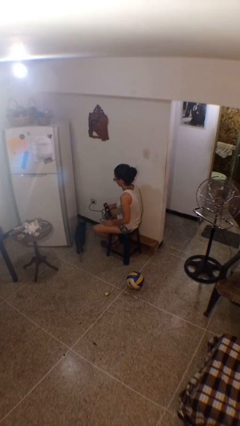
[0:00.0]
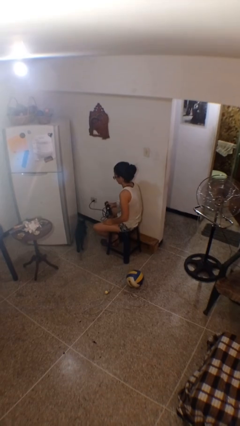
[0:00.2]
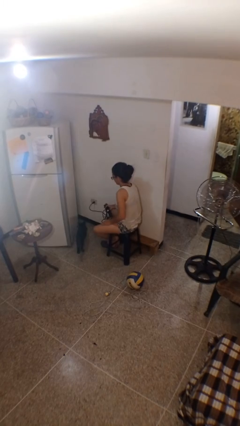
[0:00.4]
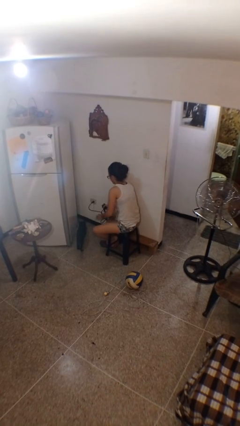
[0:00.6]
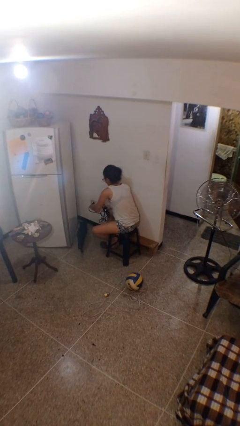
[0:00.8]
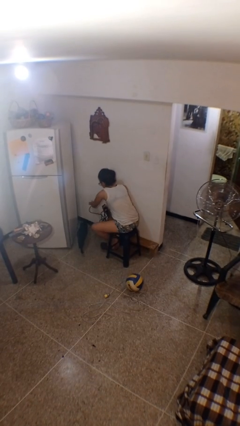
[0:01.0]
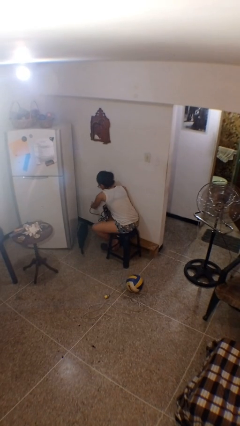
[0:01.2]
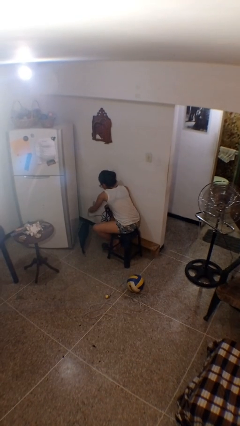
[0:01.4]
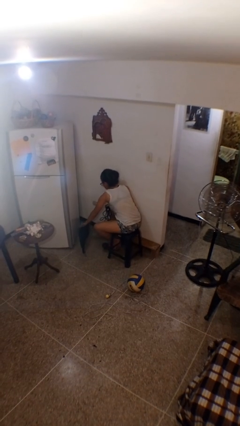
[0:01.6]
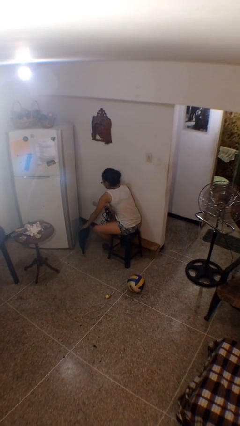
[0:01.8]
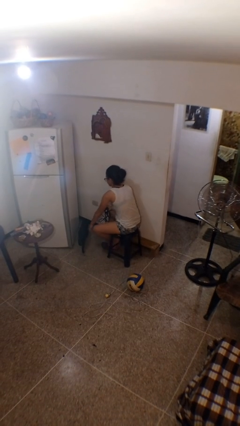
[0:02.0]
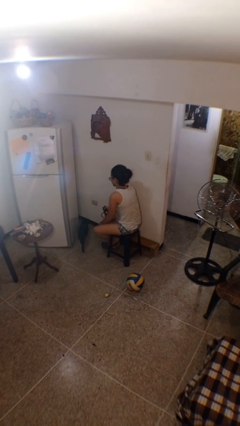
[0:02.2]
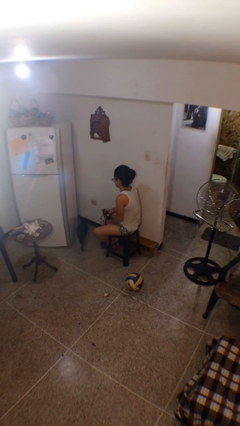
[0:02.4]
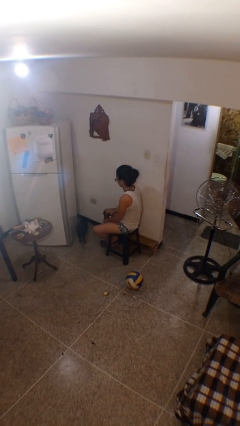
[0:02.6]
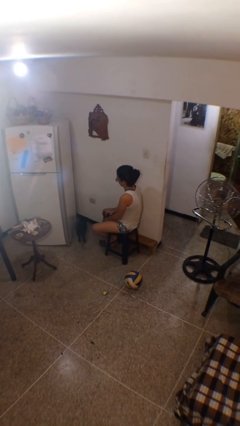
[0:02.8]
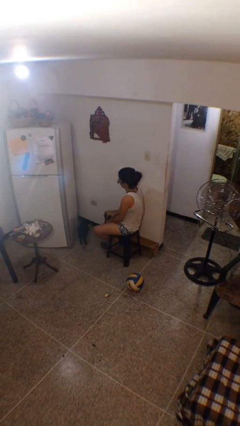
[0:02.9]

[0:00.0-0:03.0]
person unplugs from electrical socket

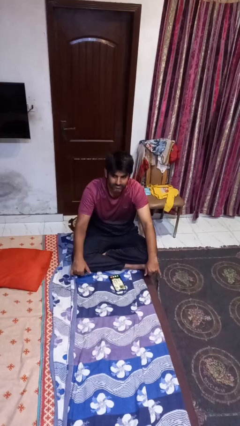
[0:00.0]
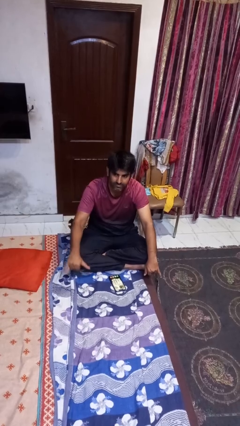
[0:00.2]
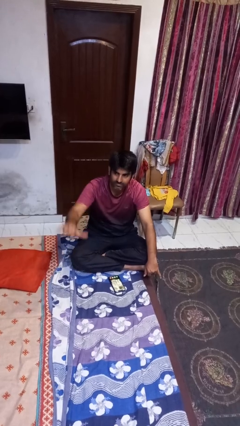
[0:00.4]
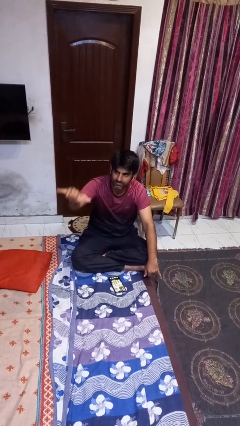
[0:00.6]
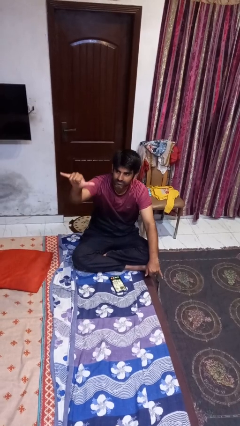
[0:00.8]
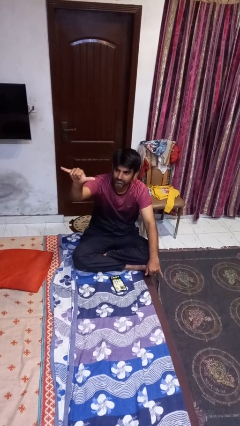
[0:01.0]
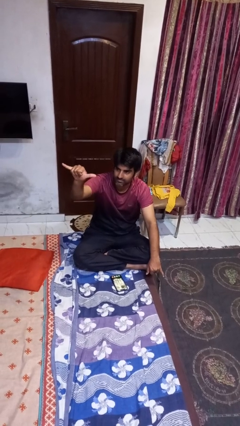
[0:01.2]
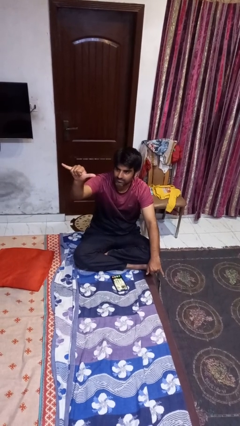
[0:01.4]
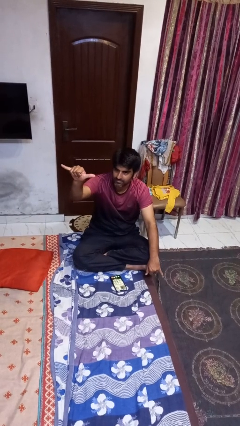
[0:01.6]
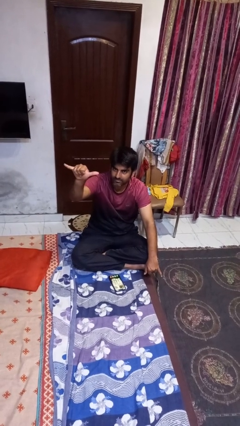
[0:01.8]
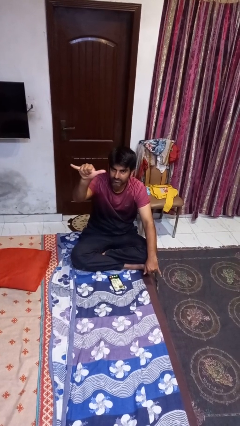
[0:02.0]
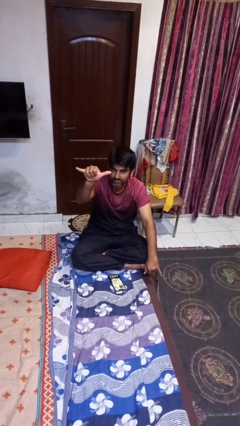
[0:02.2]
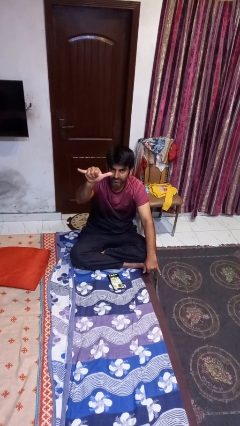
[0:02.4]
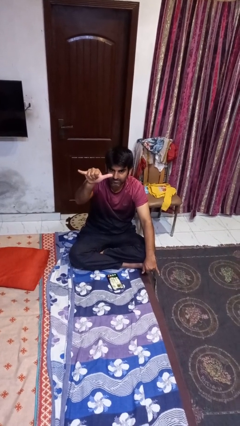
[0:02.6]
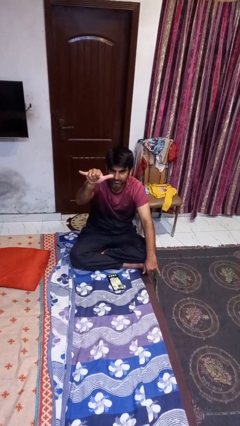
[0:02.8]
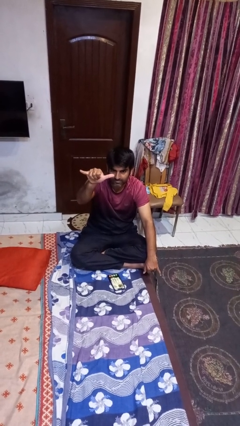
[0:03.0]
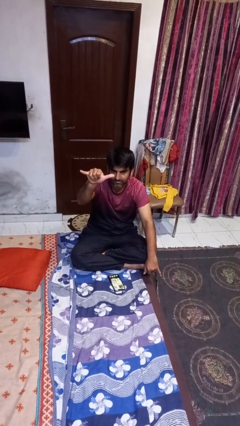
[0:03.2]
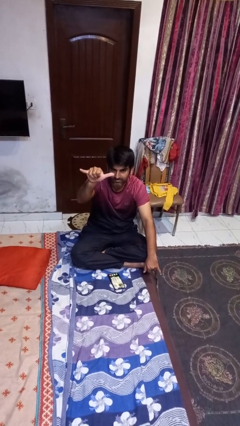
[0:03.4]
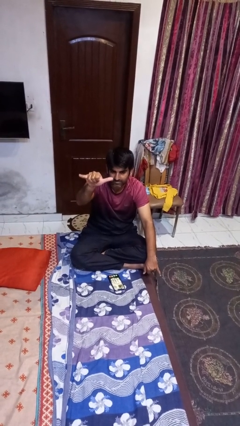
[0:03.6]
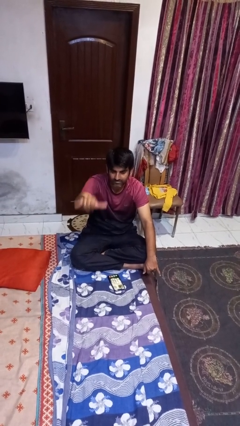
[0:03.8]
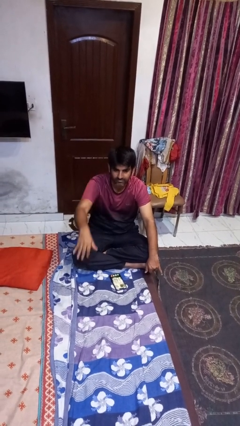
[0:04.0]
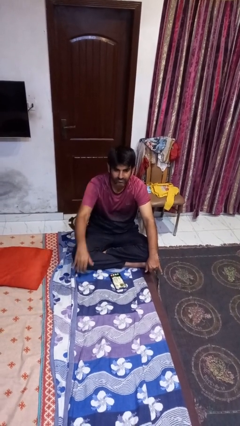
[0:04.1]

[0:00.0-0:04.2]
person gestures hang loose

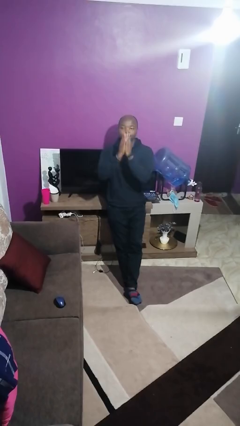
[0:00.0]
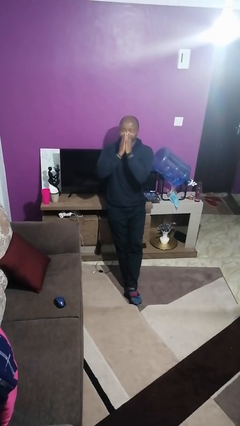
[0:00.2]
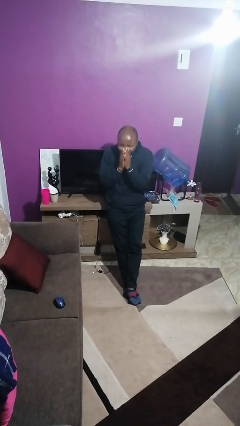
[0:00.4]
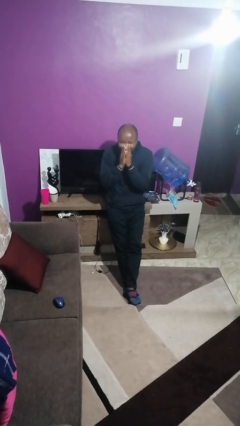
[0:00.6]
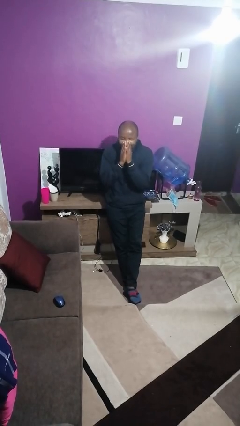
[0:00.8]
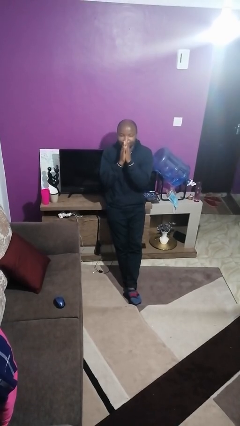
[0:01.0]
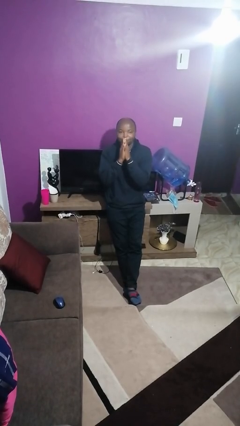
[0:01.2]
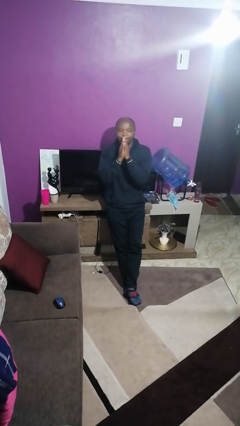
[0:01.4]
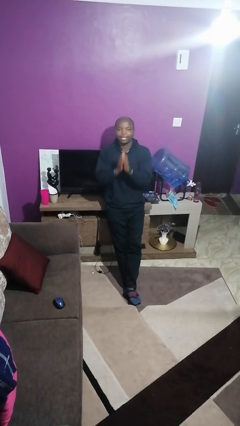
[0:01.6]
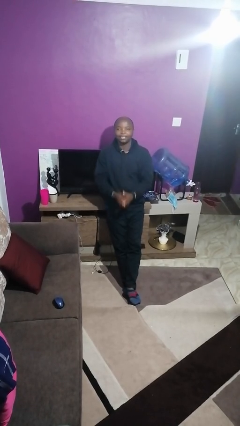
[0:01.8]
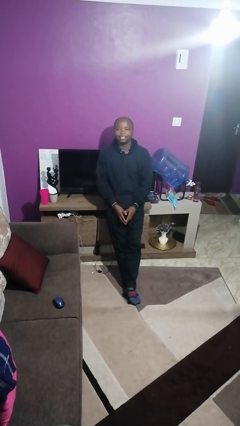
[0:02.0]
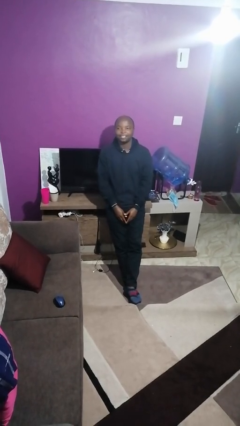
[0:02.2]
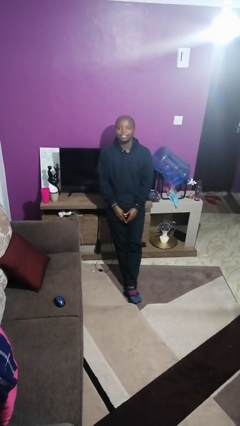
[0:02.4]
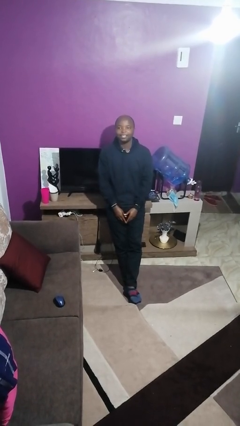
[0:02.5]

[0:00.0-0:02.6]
person sneezes into hand

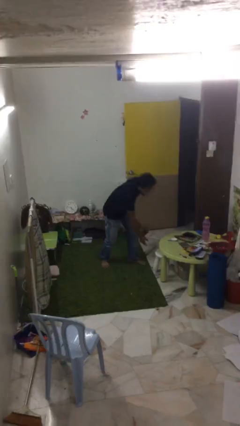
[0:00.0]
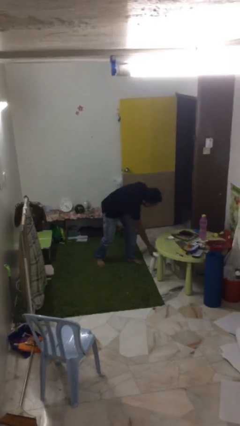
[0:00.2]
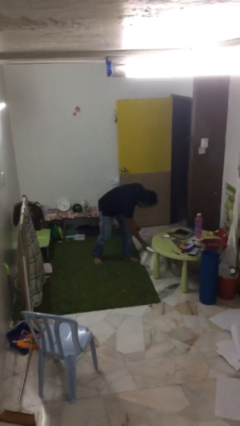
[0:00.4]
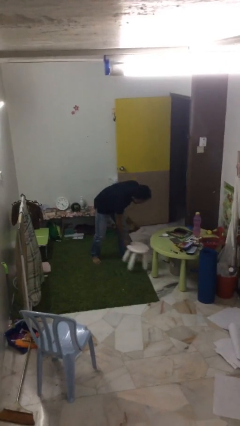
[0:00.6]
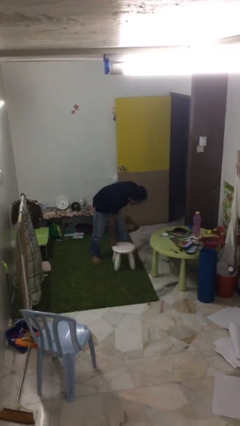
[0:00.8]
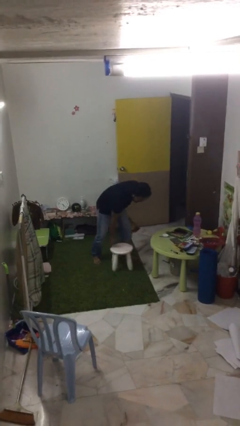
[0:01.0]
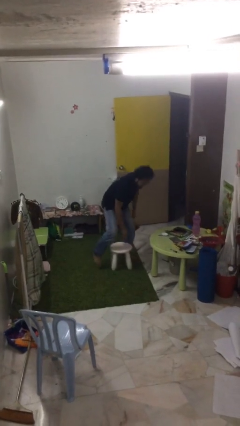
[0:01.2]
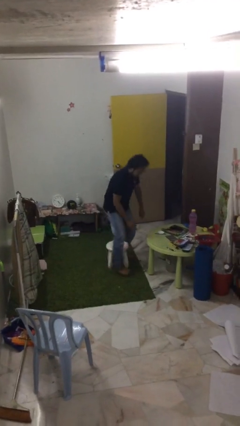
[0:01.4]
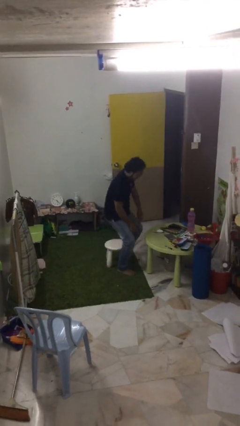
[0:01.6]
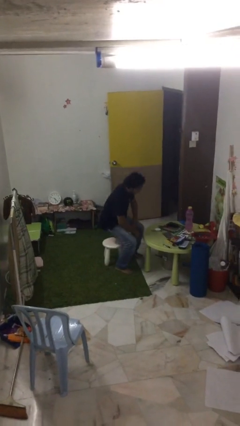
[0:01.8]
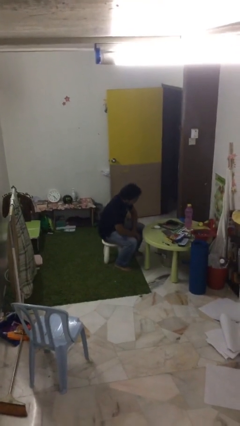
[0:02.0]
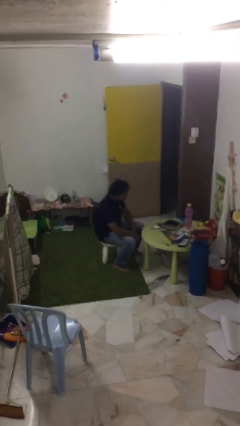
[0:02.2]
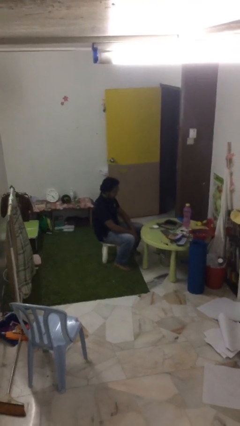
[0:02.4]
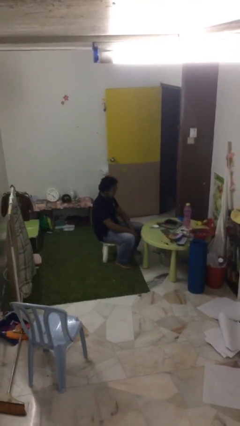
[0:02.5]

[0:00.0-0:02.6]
person sits down

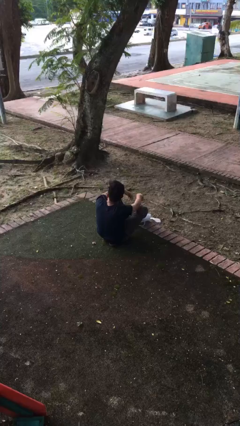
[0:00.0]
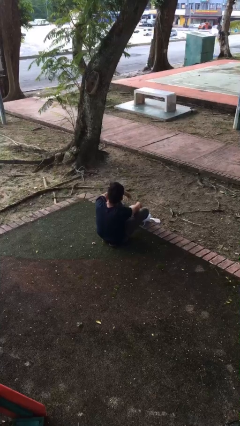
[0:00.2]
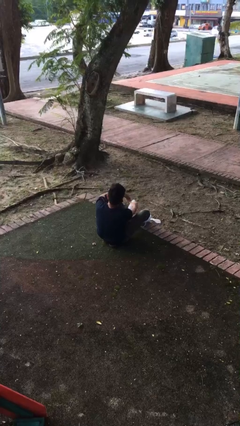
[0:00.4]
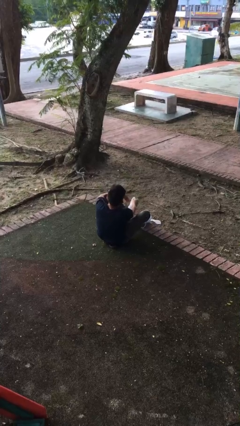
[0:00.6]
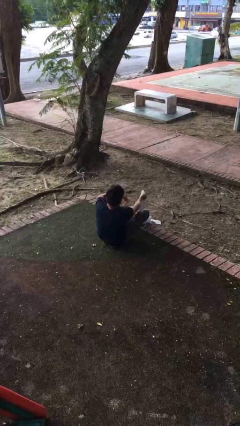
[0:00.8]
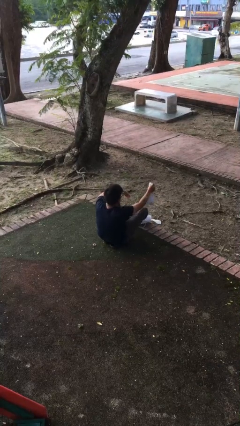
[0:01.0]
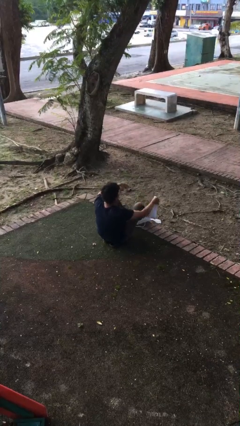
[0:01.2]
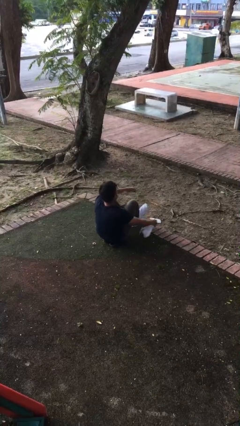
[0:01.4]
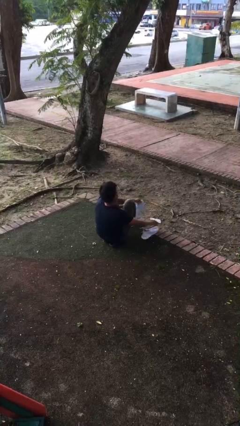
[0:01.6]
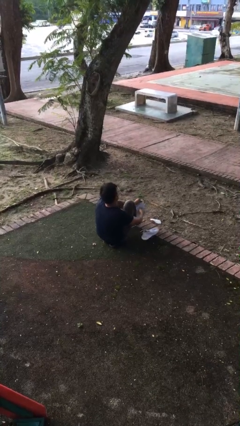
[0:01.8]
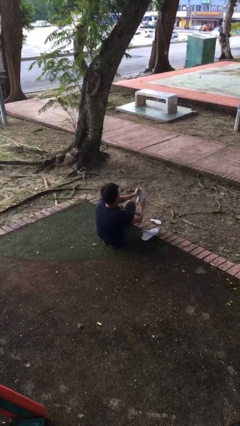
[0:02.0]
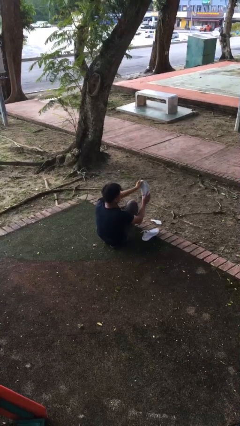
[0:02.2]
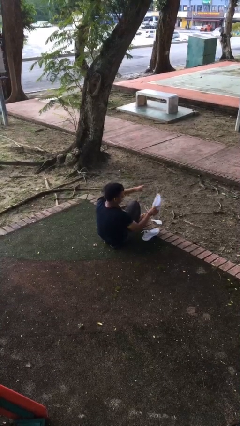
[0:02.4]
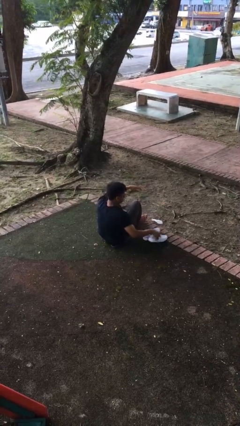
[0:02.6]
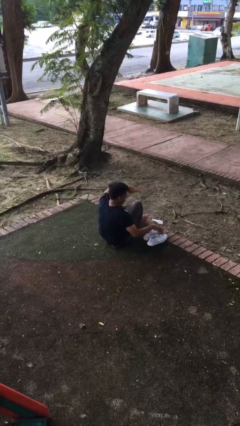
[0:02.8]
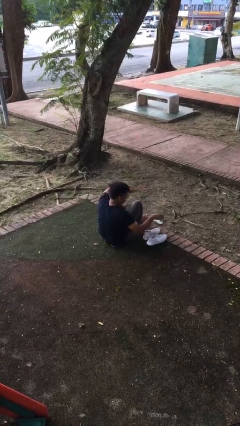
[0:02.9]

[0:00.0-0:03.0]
person takes off shoes

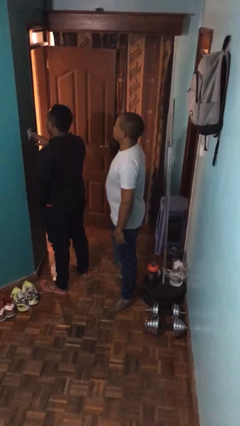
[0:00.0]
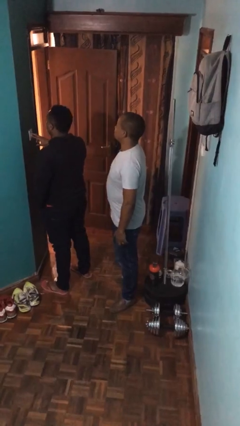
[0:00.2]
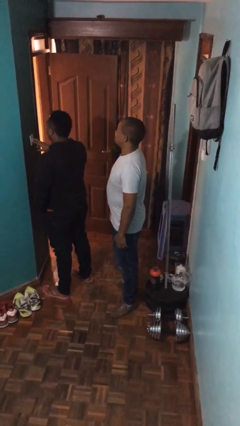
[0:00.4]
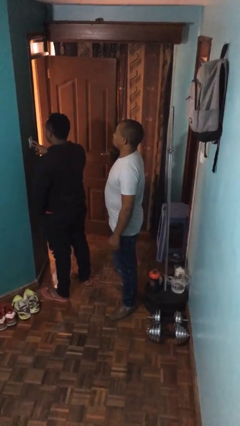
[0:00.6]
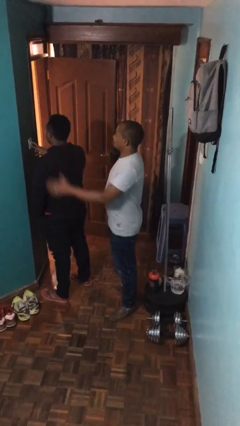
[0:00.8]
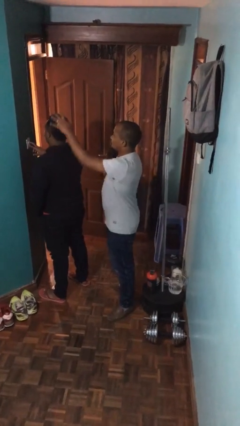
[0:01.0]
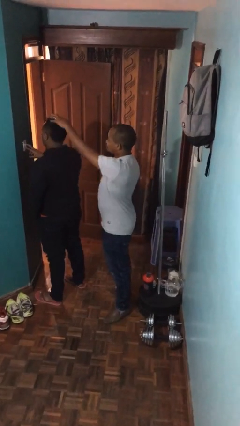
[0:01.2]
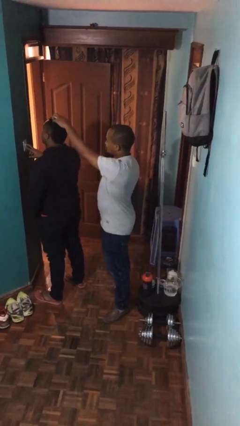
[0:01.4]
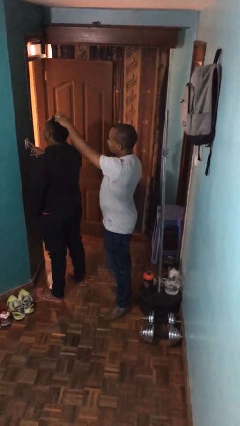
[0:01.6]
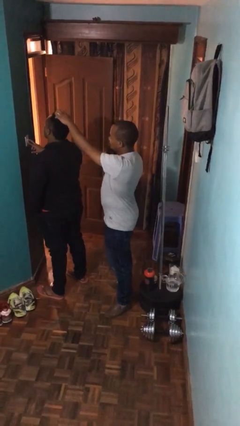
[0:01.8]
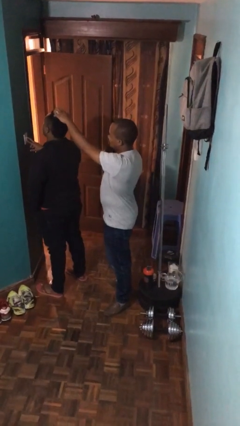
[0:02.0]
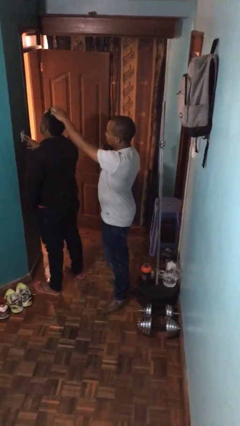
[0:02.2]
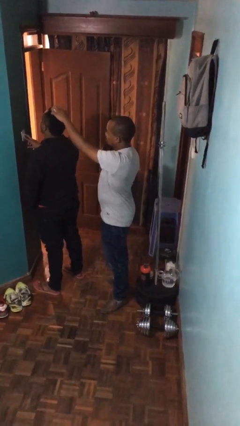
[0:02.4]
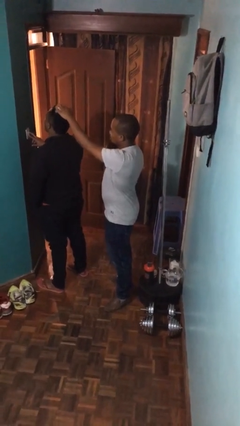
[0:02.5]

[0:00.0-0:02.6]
person grabs person by hair
